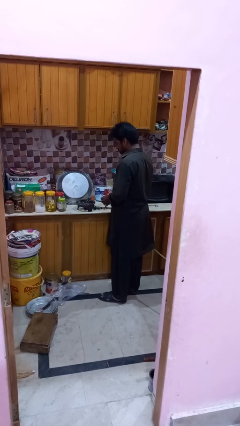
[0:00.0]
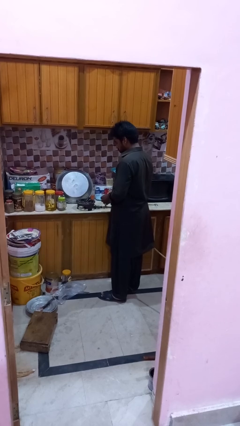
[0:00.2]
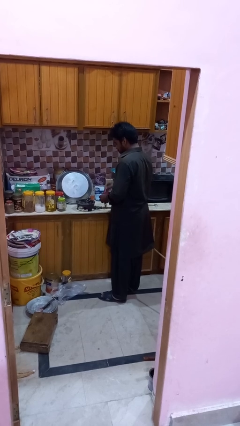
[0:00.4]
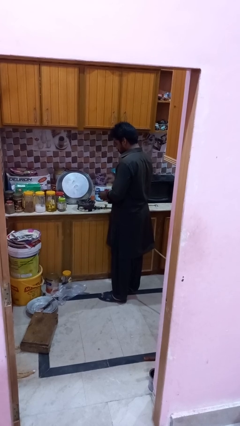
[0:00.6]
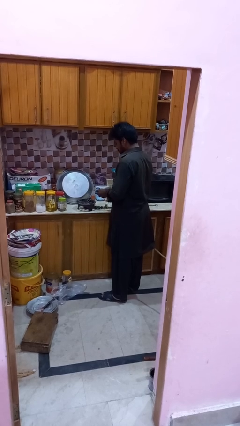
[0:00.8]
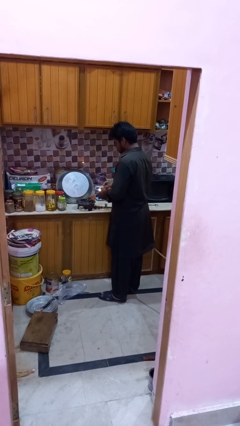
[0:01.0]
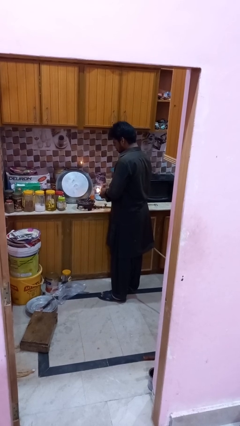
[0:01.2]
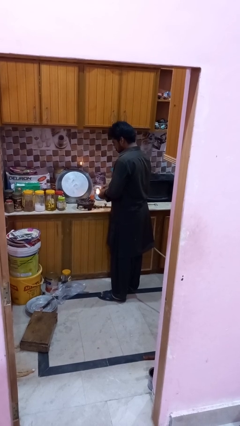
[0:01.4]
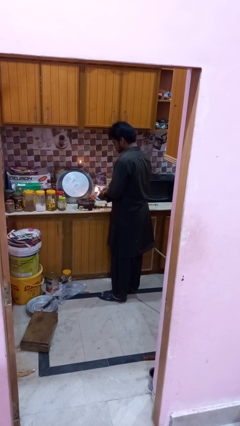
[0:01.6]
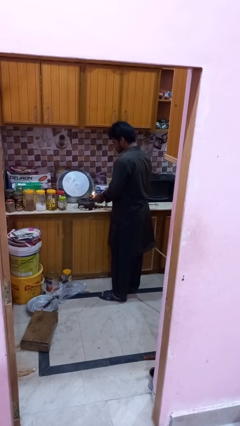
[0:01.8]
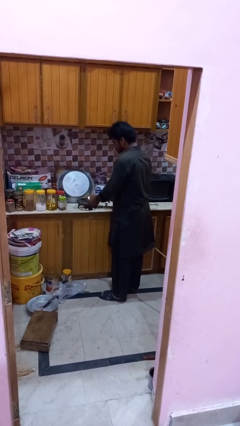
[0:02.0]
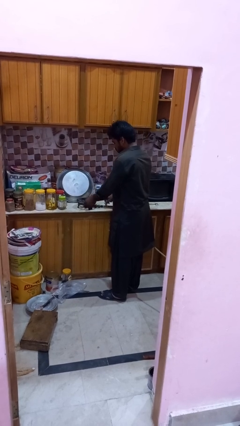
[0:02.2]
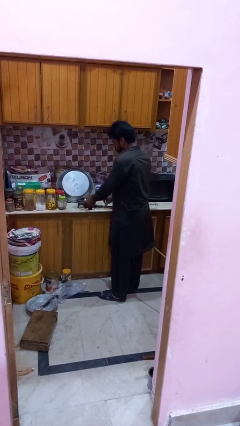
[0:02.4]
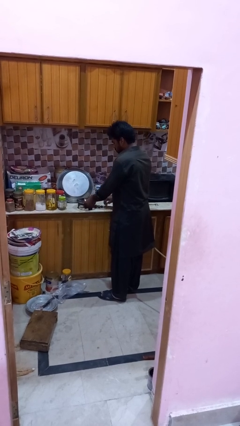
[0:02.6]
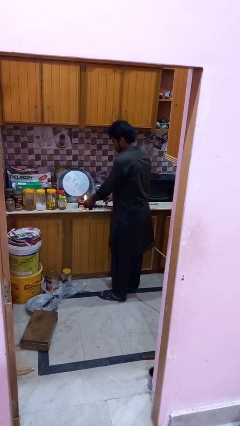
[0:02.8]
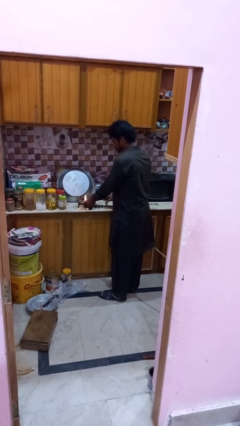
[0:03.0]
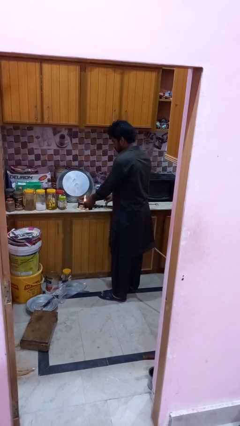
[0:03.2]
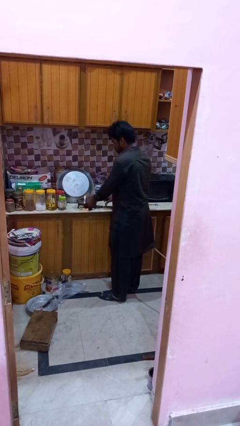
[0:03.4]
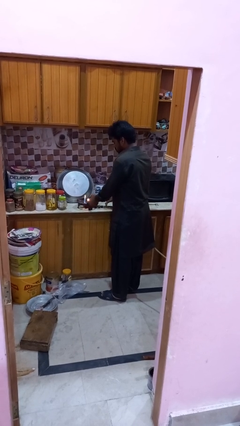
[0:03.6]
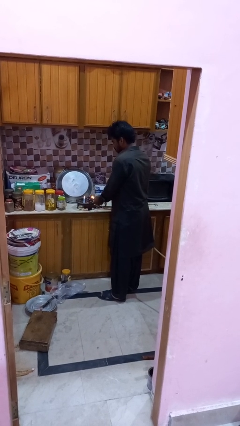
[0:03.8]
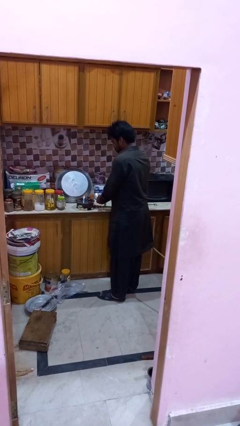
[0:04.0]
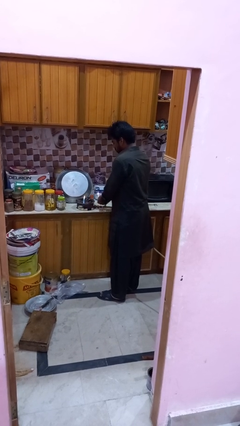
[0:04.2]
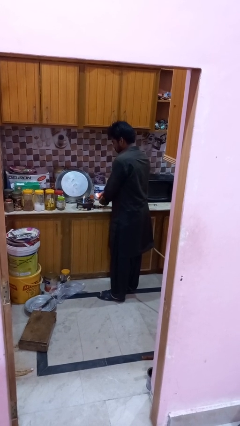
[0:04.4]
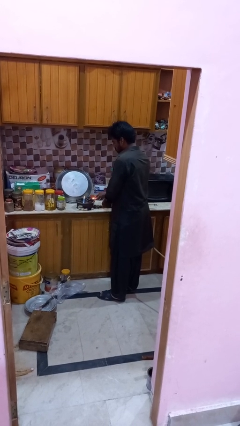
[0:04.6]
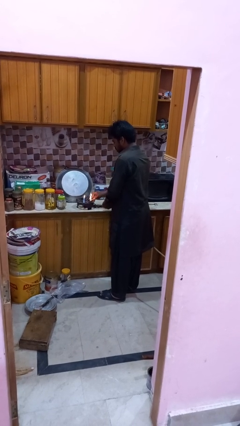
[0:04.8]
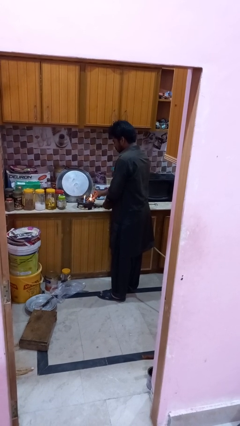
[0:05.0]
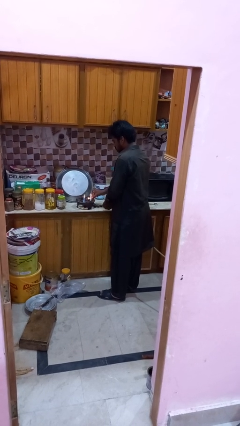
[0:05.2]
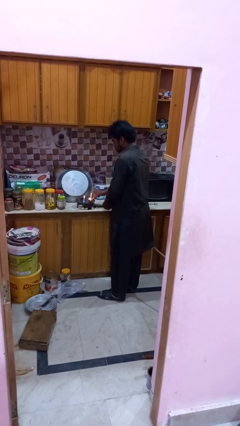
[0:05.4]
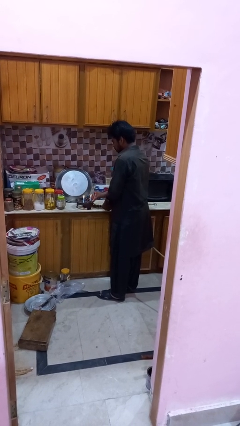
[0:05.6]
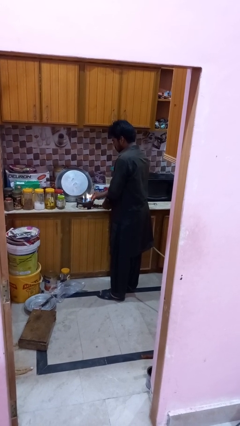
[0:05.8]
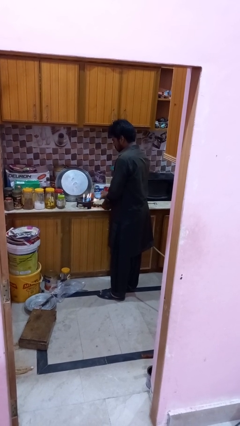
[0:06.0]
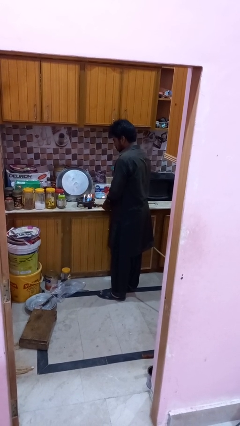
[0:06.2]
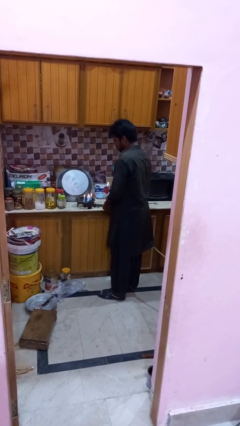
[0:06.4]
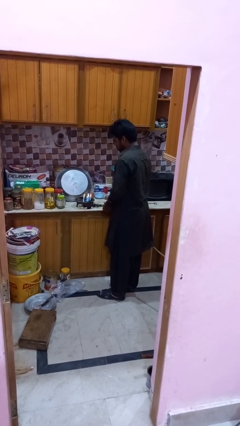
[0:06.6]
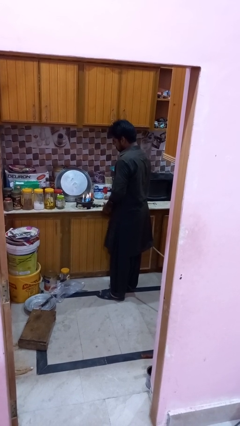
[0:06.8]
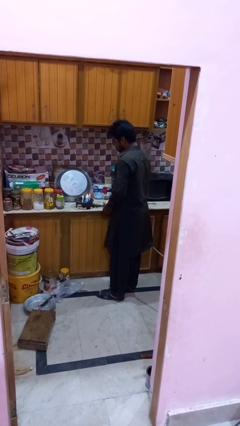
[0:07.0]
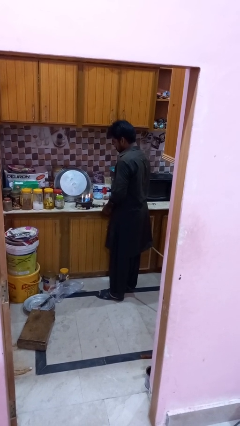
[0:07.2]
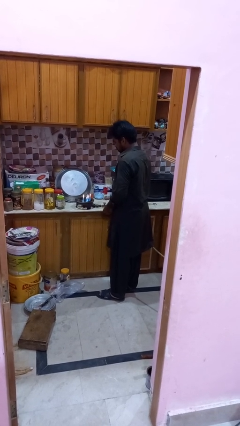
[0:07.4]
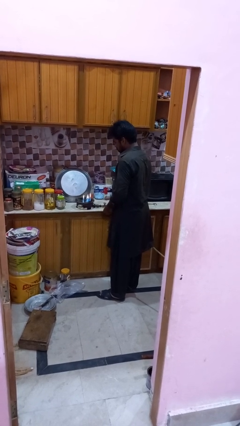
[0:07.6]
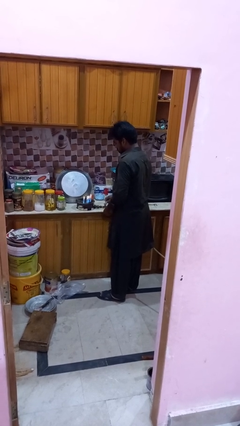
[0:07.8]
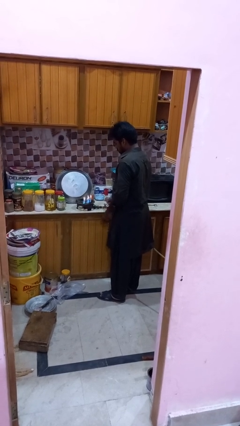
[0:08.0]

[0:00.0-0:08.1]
person turns on stovetop

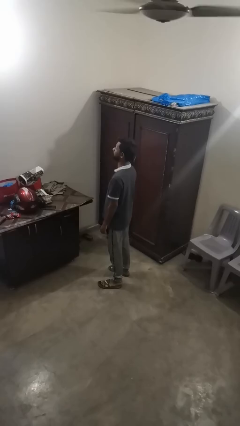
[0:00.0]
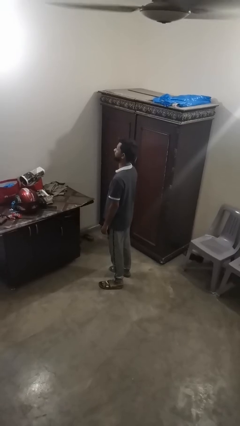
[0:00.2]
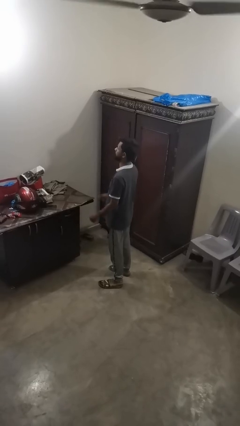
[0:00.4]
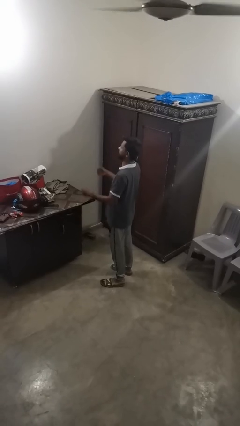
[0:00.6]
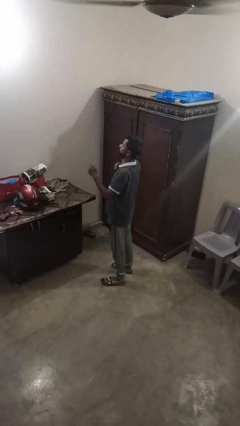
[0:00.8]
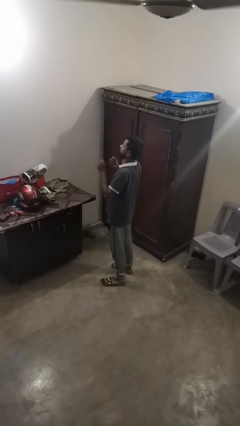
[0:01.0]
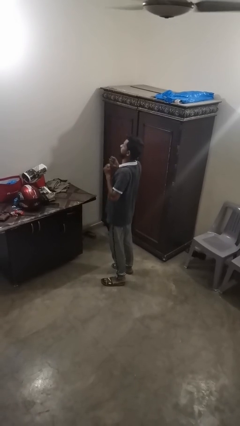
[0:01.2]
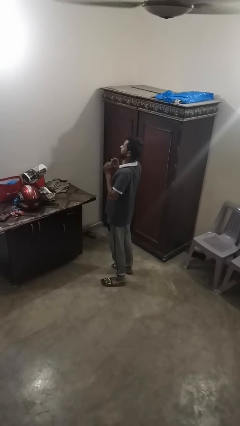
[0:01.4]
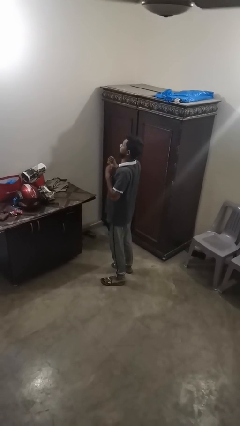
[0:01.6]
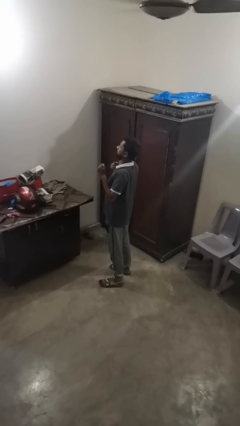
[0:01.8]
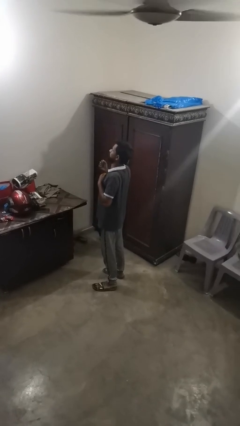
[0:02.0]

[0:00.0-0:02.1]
person drums on chest

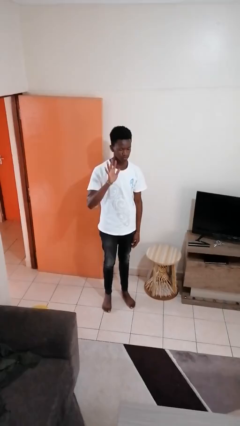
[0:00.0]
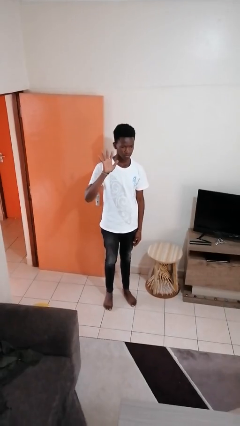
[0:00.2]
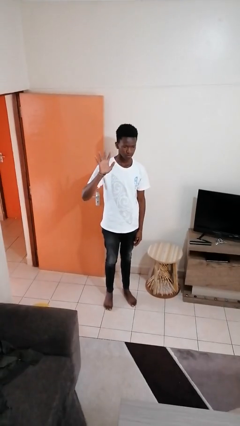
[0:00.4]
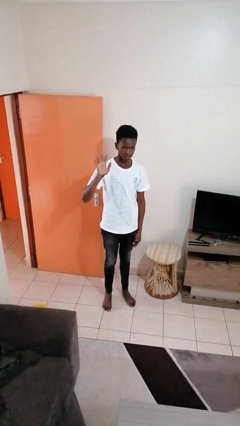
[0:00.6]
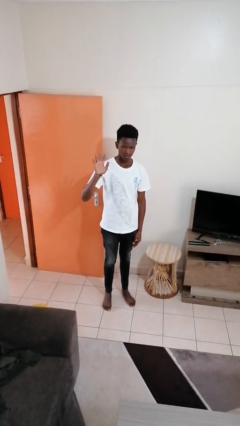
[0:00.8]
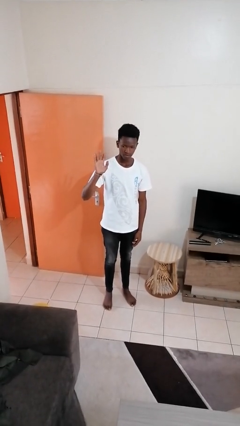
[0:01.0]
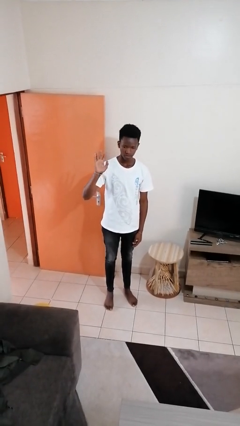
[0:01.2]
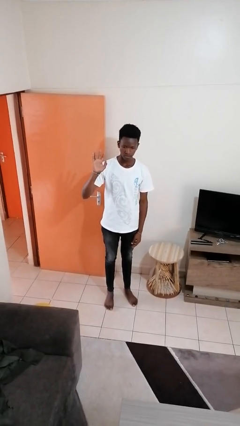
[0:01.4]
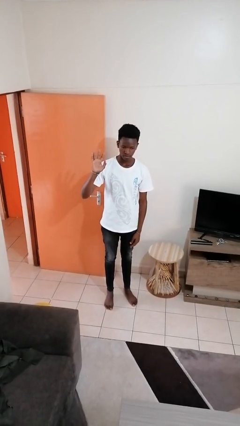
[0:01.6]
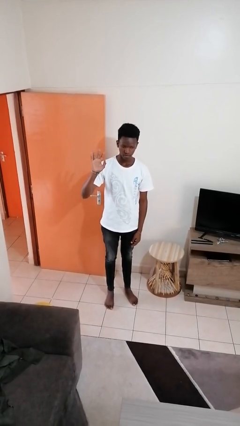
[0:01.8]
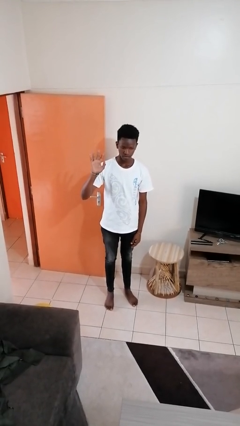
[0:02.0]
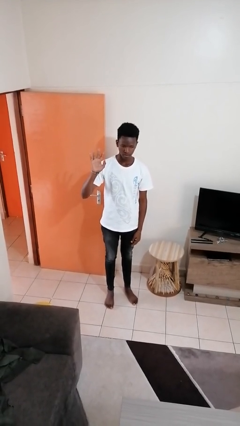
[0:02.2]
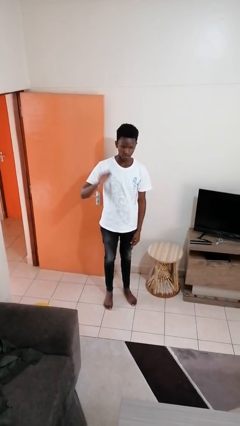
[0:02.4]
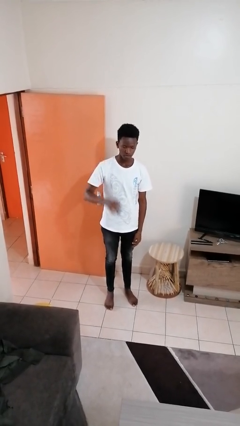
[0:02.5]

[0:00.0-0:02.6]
person gestures number five

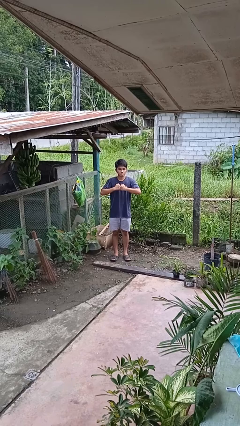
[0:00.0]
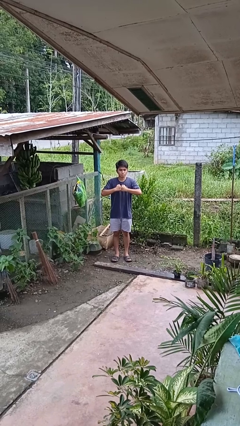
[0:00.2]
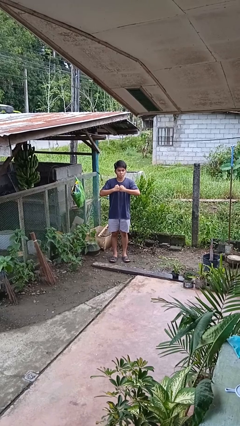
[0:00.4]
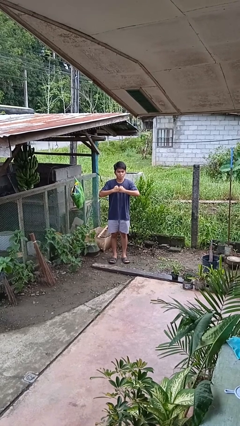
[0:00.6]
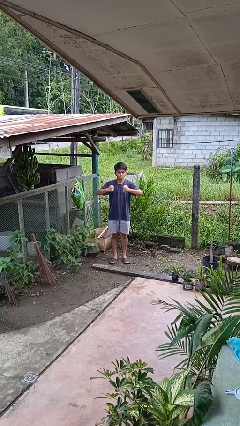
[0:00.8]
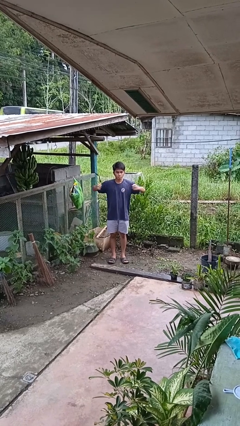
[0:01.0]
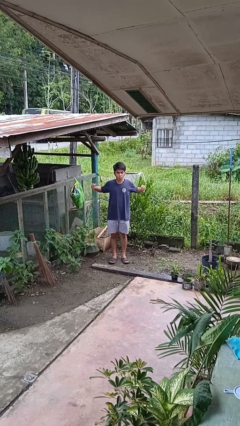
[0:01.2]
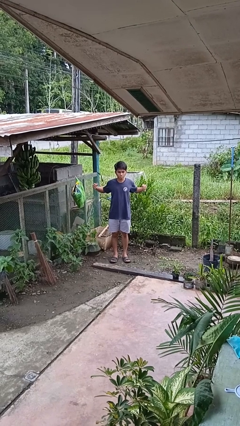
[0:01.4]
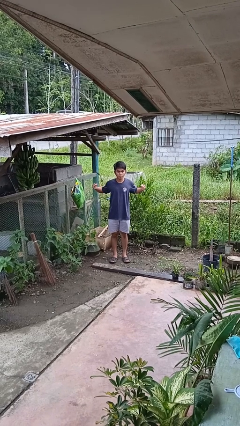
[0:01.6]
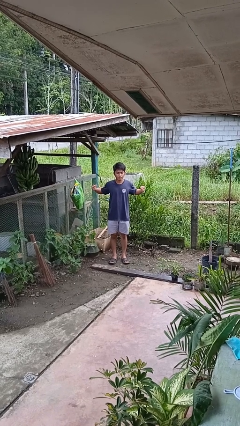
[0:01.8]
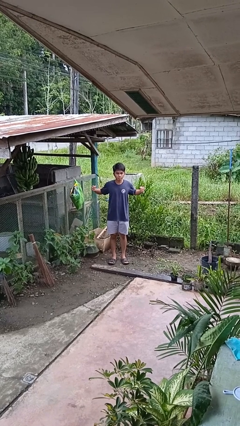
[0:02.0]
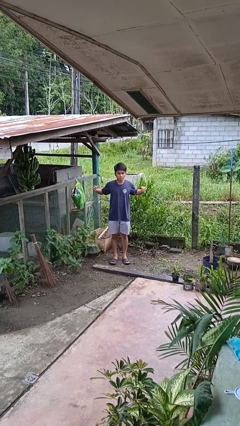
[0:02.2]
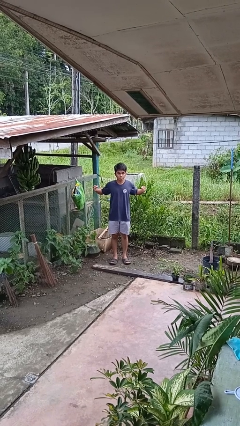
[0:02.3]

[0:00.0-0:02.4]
person gestures zoom in

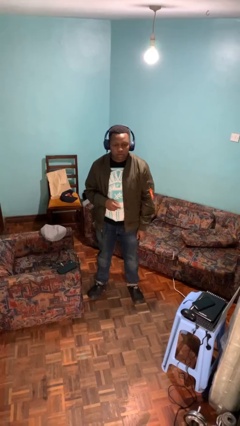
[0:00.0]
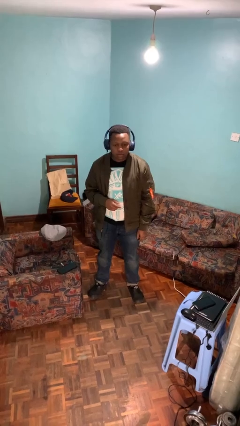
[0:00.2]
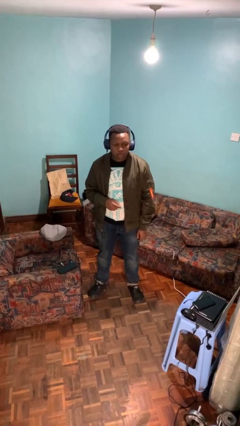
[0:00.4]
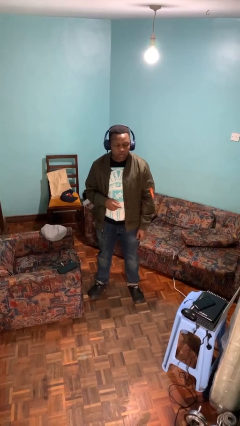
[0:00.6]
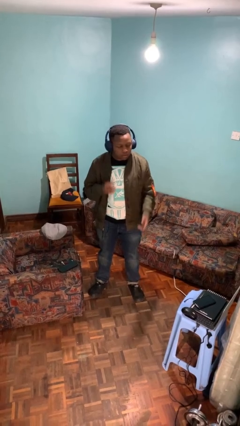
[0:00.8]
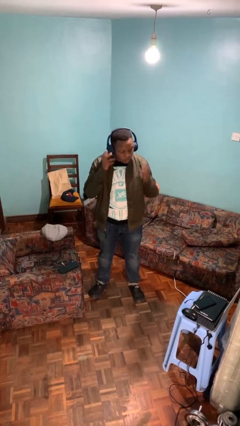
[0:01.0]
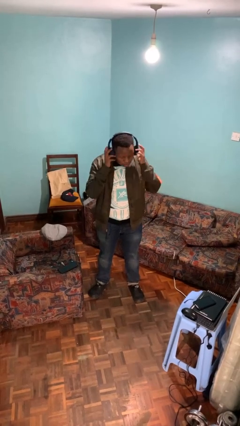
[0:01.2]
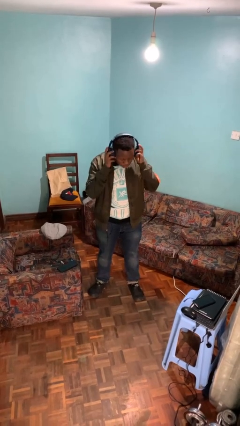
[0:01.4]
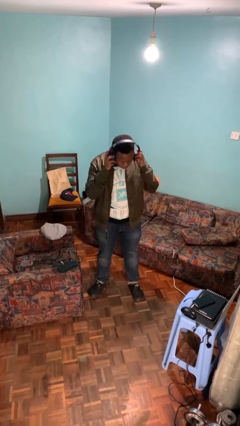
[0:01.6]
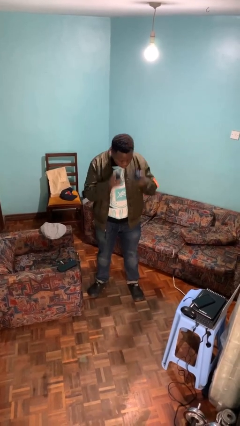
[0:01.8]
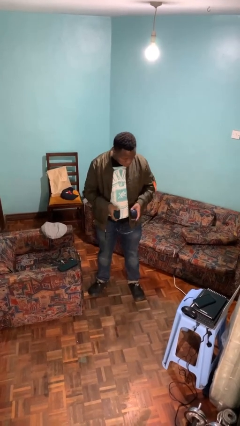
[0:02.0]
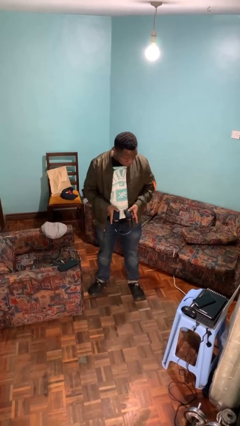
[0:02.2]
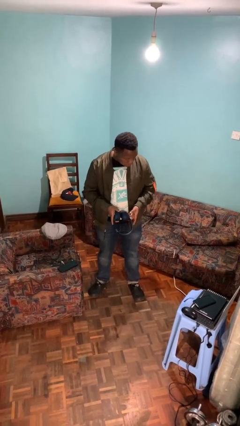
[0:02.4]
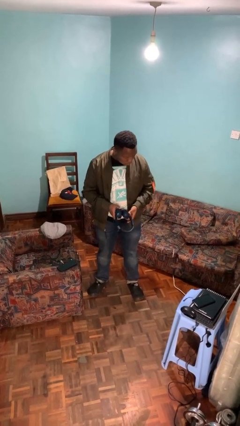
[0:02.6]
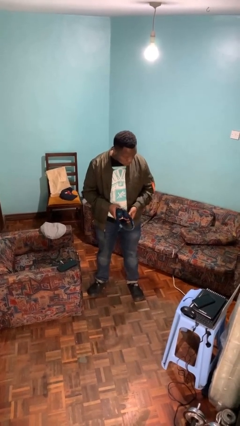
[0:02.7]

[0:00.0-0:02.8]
person takes off headphones
